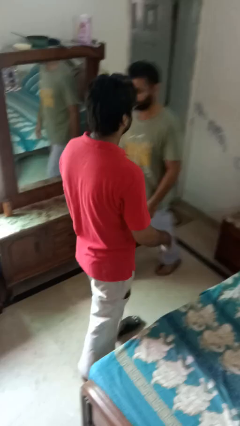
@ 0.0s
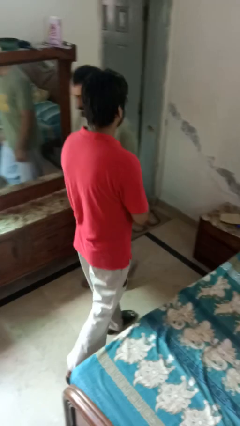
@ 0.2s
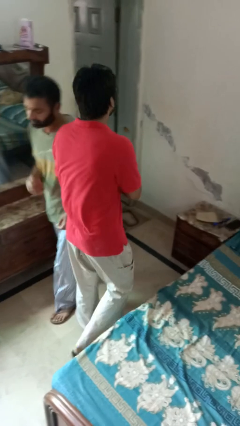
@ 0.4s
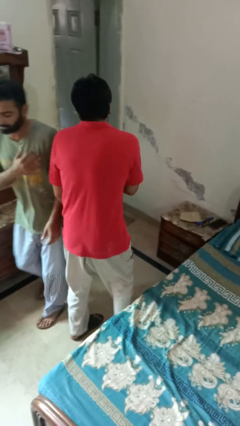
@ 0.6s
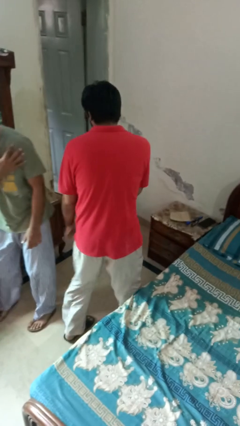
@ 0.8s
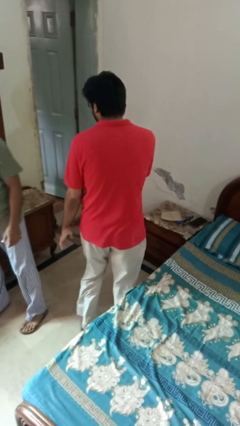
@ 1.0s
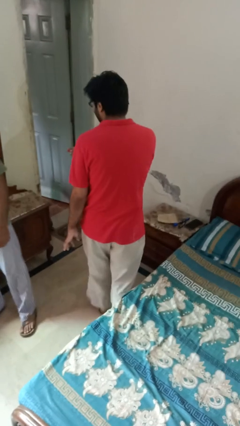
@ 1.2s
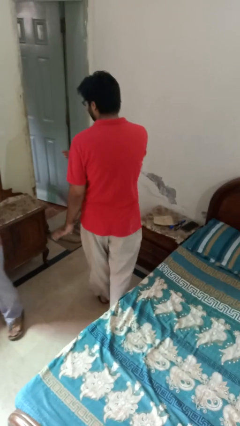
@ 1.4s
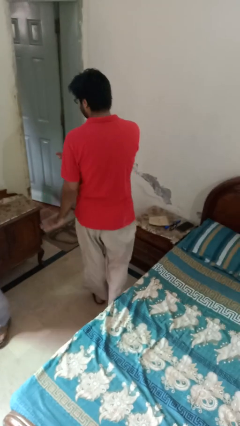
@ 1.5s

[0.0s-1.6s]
person bumps into person

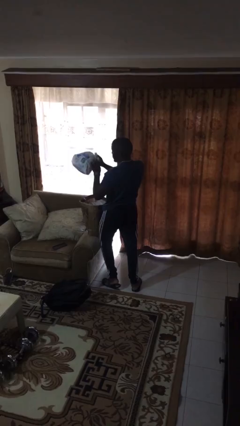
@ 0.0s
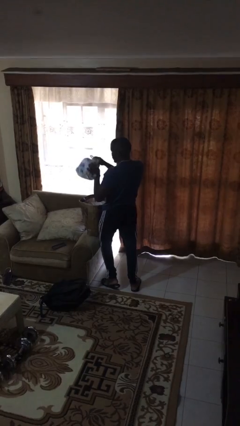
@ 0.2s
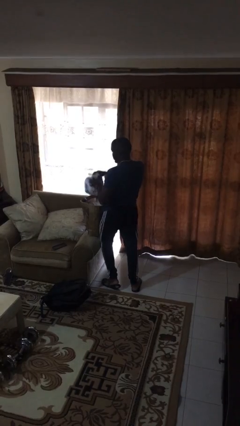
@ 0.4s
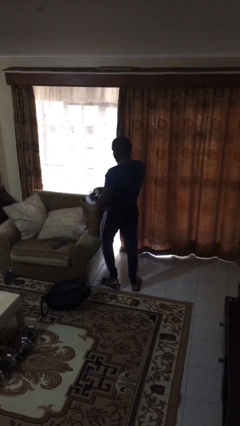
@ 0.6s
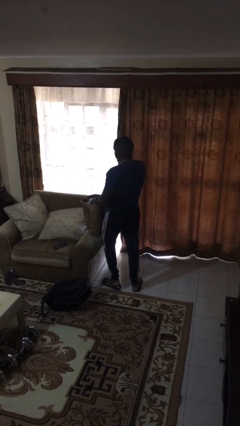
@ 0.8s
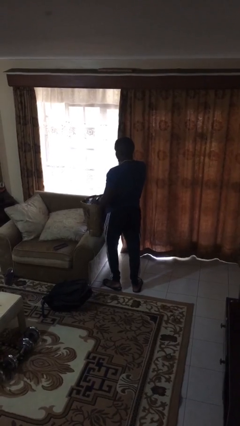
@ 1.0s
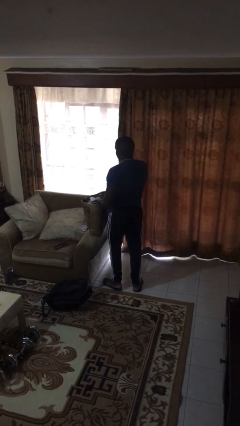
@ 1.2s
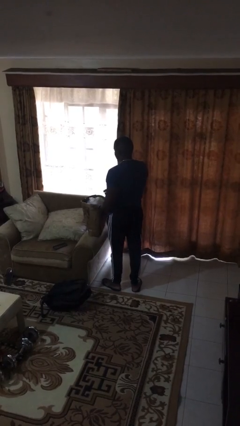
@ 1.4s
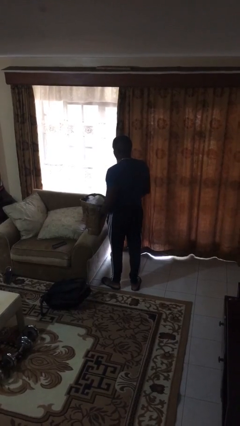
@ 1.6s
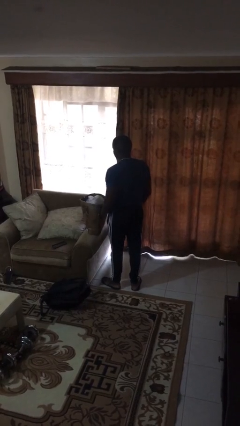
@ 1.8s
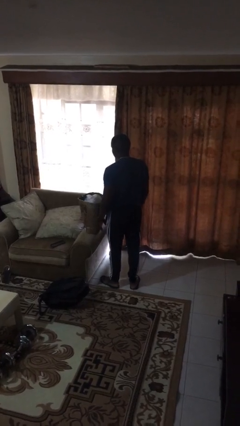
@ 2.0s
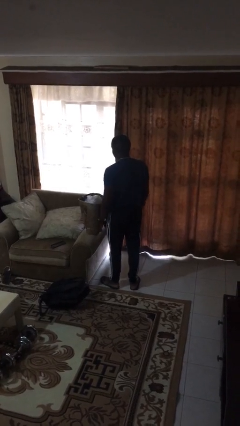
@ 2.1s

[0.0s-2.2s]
person puts object into bag

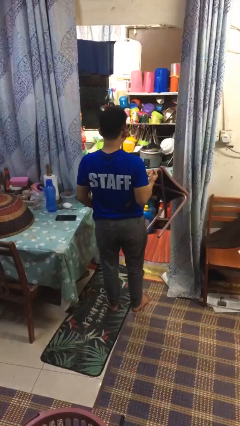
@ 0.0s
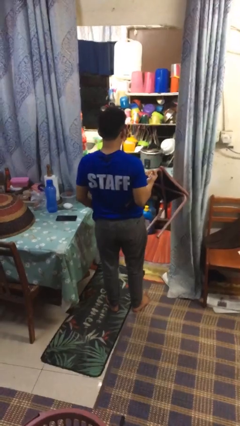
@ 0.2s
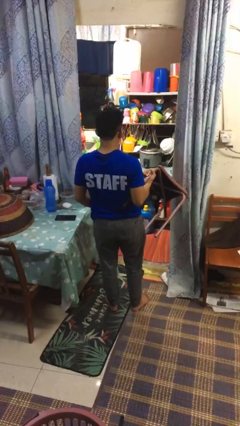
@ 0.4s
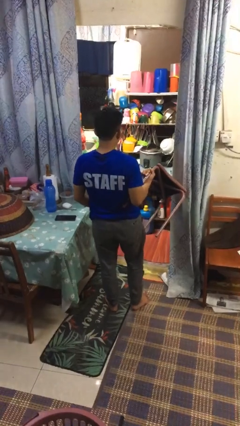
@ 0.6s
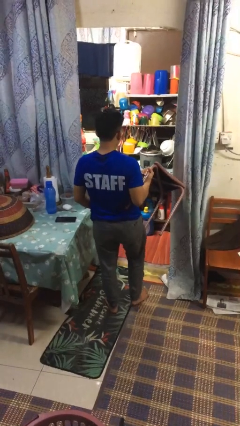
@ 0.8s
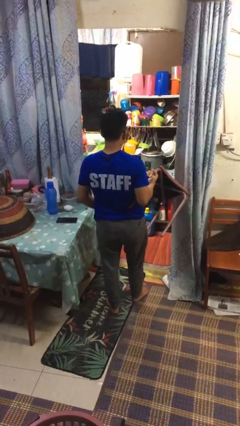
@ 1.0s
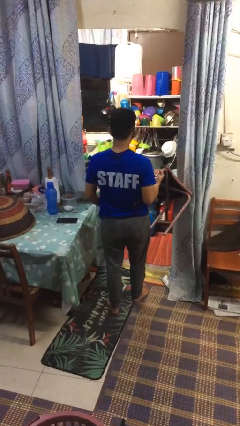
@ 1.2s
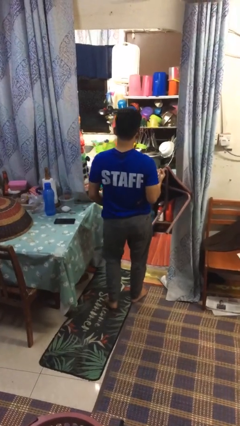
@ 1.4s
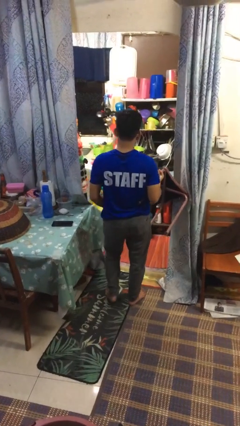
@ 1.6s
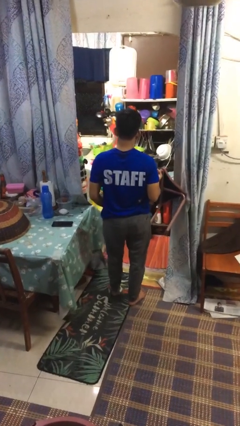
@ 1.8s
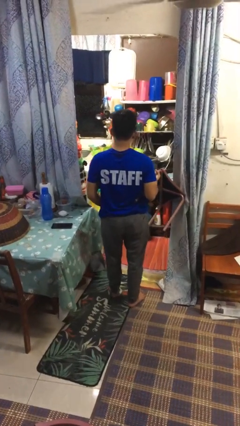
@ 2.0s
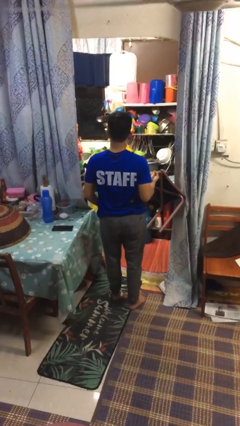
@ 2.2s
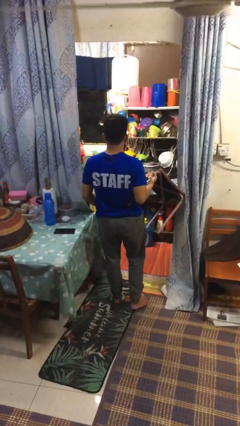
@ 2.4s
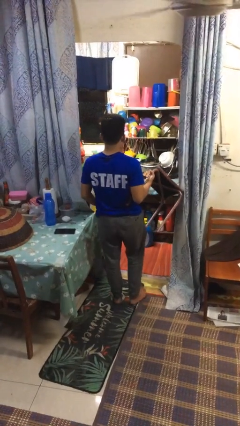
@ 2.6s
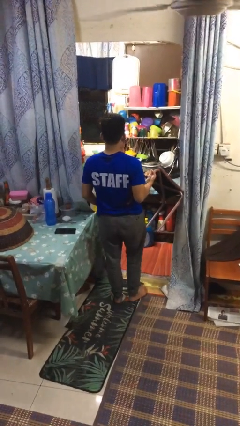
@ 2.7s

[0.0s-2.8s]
person carries furniture

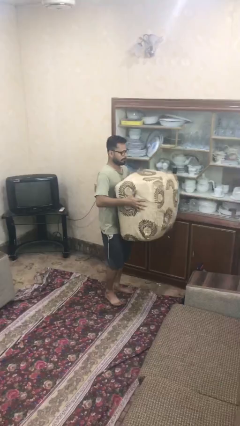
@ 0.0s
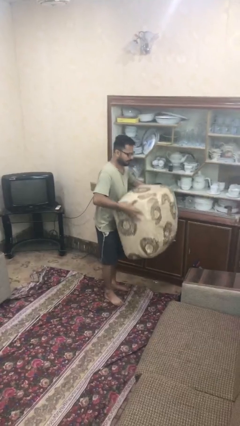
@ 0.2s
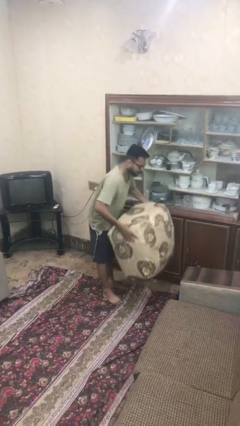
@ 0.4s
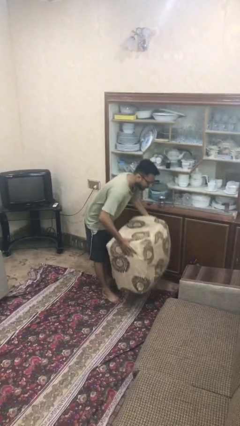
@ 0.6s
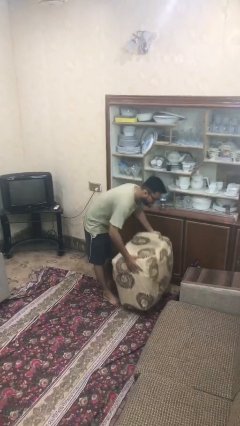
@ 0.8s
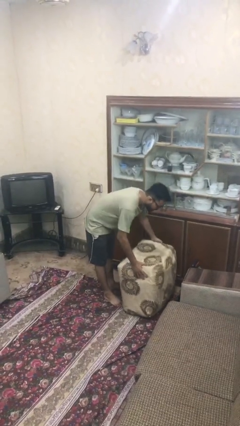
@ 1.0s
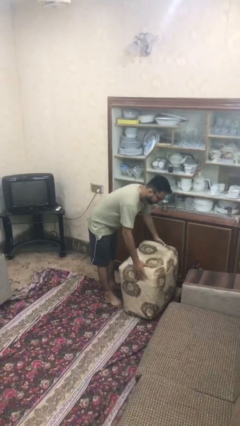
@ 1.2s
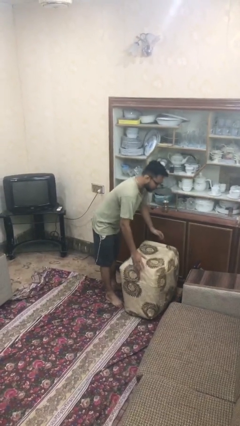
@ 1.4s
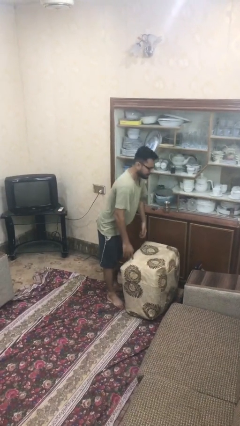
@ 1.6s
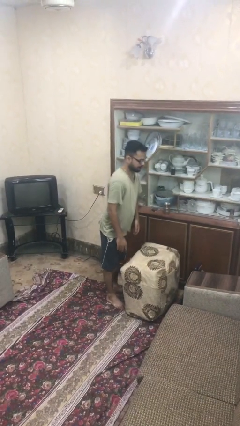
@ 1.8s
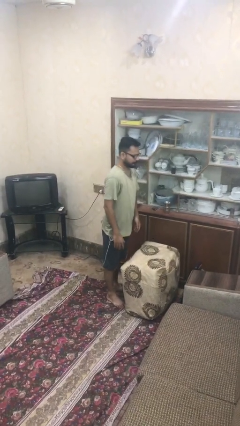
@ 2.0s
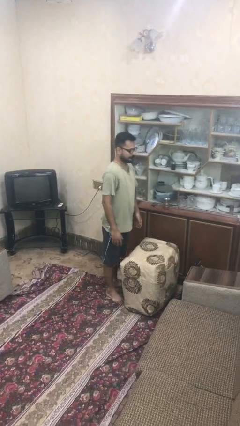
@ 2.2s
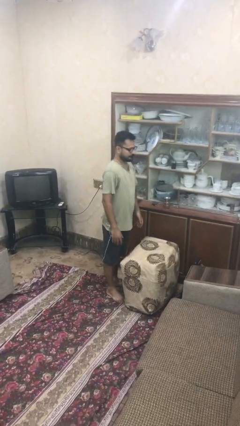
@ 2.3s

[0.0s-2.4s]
person puts down object on floor

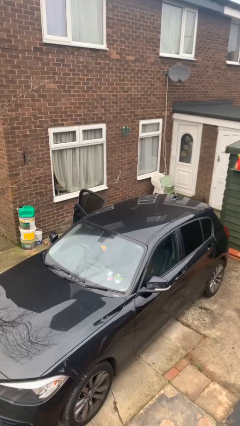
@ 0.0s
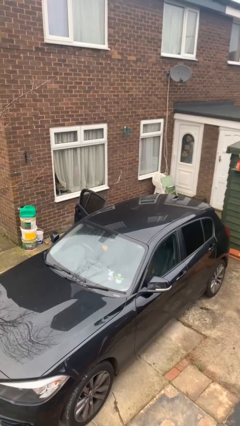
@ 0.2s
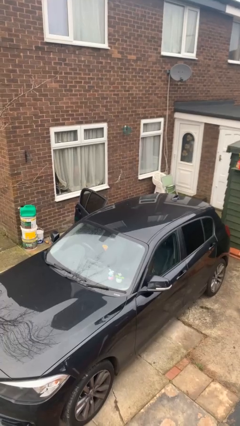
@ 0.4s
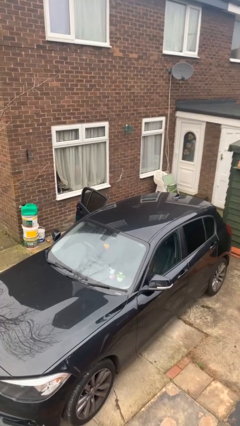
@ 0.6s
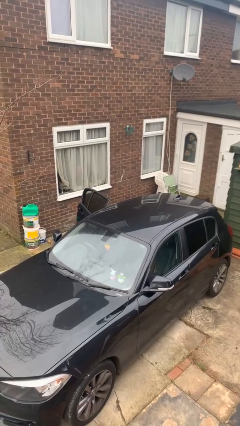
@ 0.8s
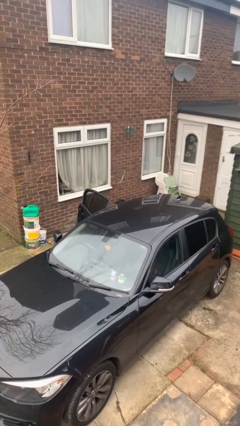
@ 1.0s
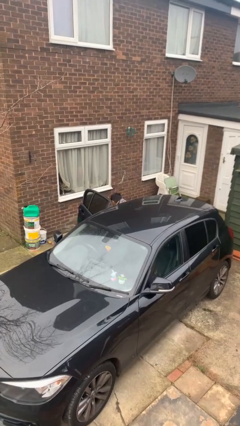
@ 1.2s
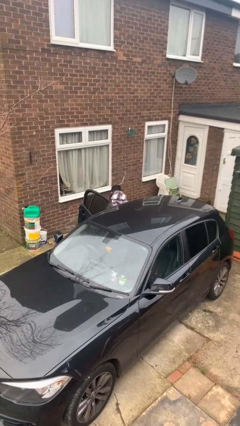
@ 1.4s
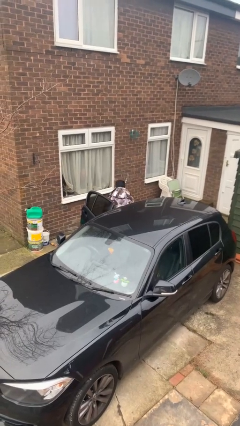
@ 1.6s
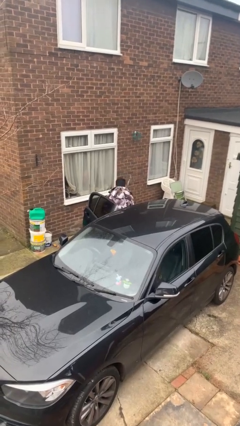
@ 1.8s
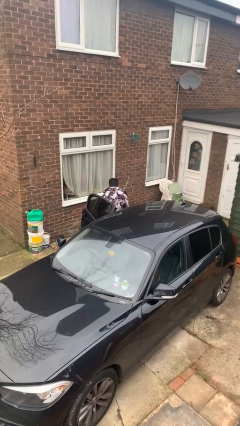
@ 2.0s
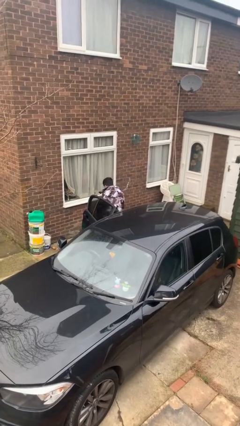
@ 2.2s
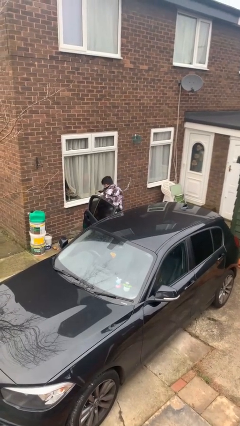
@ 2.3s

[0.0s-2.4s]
person exits car

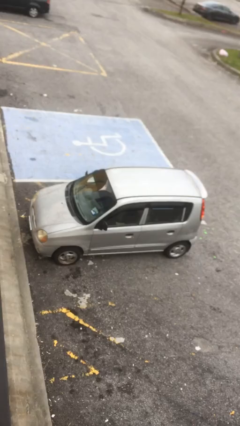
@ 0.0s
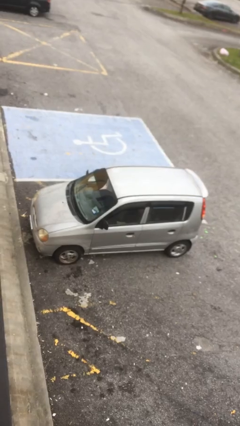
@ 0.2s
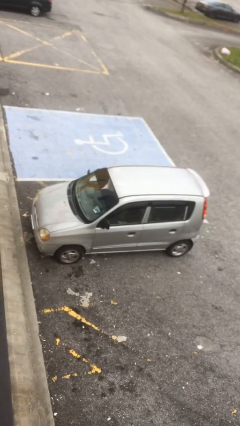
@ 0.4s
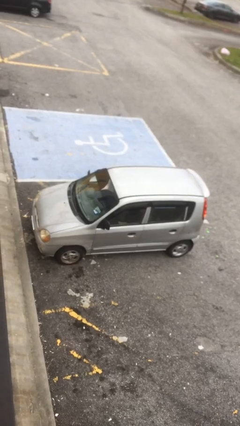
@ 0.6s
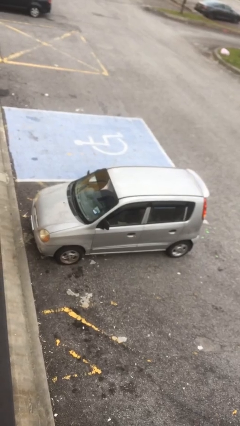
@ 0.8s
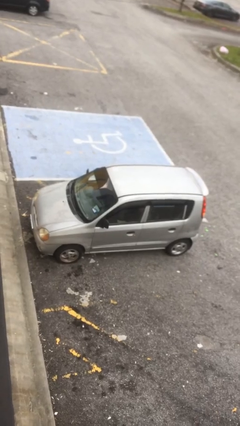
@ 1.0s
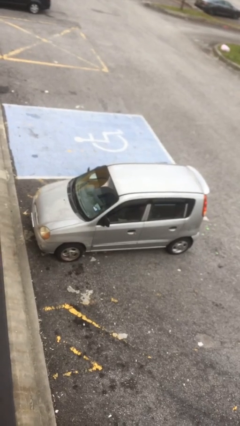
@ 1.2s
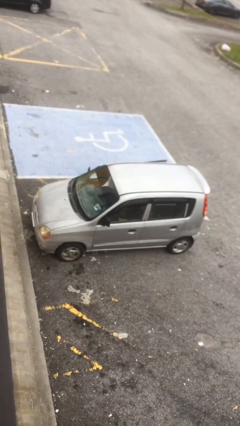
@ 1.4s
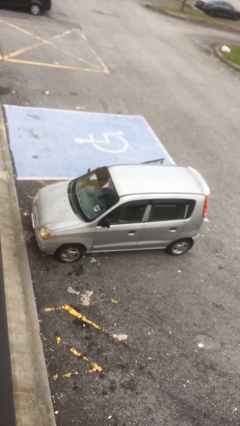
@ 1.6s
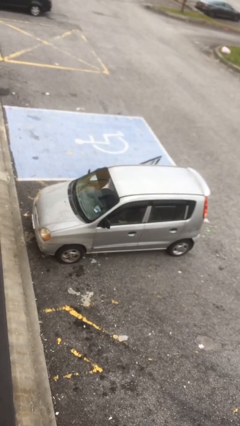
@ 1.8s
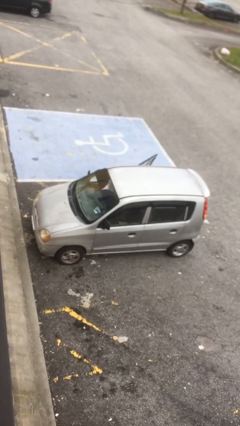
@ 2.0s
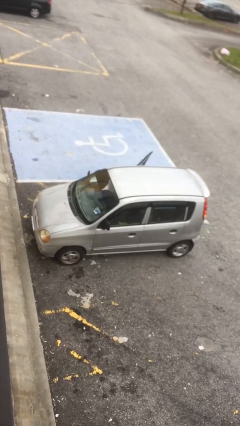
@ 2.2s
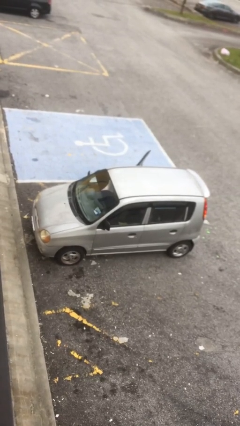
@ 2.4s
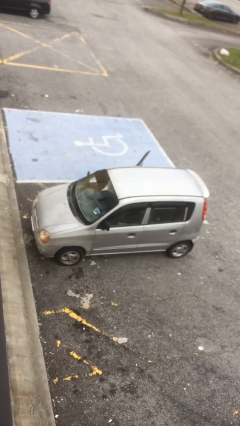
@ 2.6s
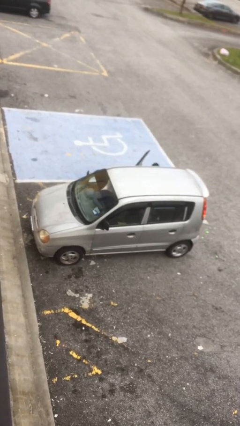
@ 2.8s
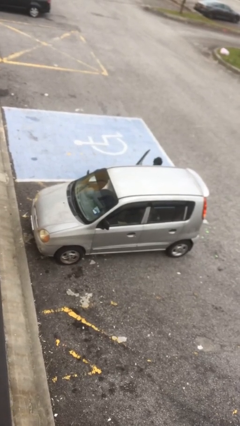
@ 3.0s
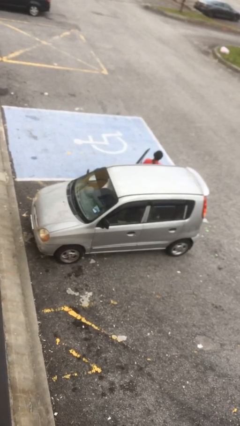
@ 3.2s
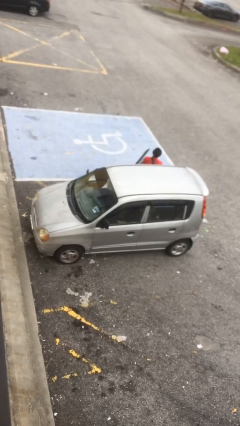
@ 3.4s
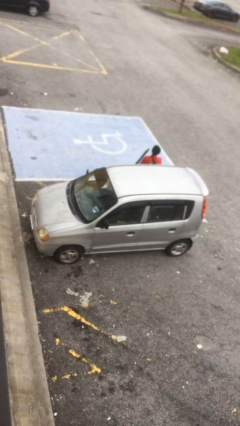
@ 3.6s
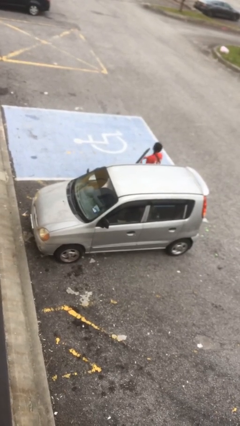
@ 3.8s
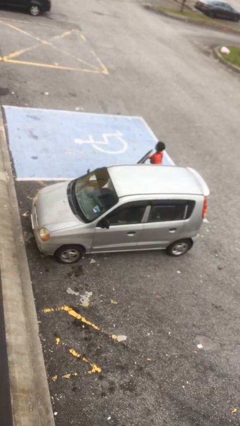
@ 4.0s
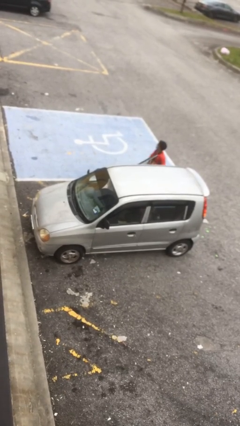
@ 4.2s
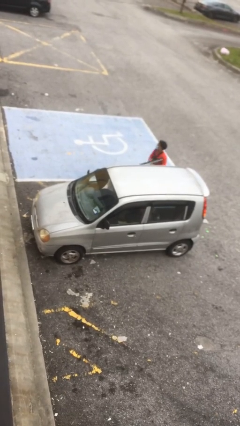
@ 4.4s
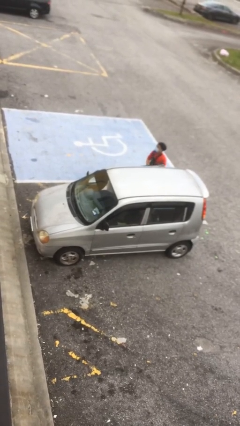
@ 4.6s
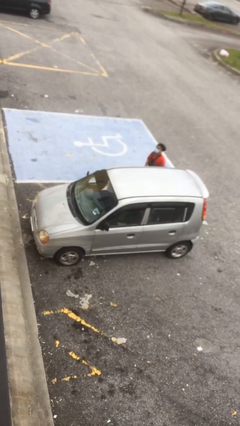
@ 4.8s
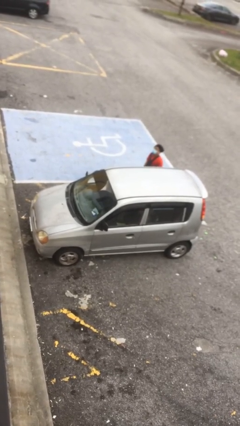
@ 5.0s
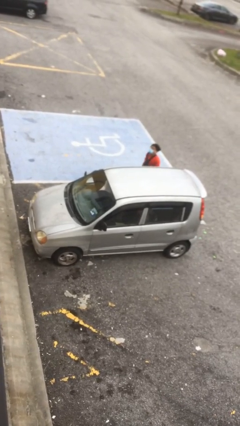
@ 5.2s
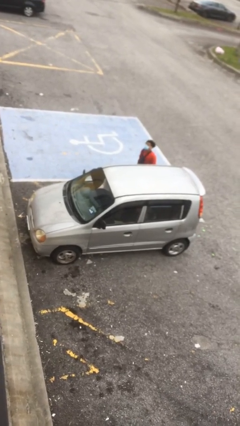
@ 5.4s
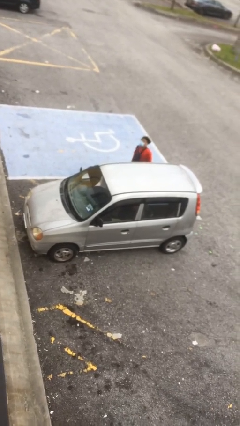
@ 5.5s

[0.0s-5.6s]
car drops off person

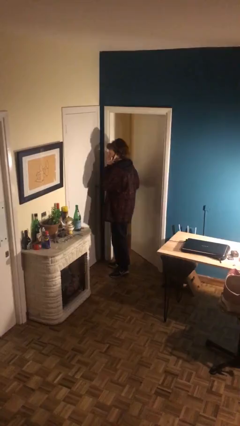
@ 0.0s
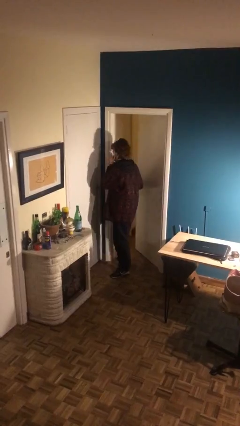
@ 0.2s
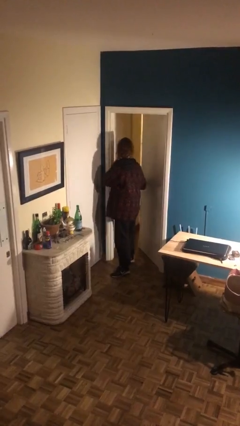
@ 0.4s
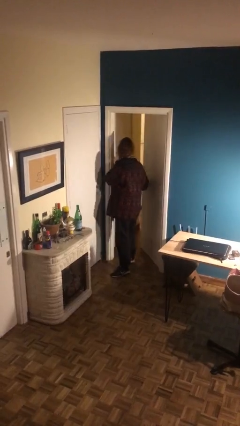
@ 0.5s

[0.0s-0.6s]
person opens facility door
